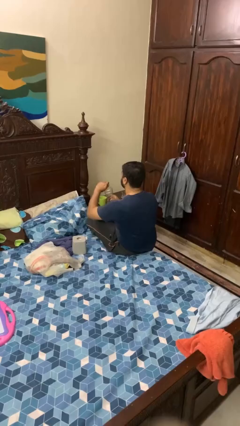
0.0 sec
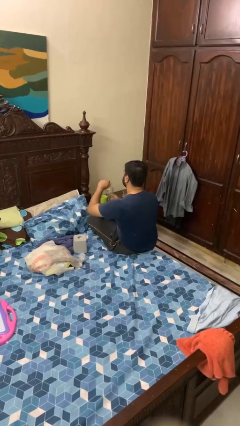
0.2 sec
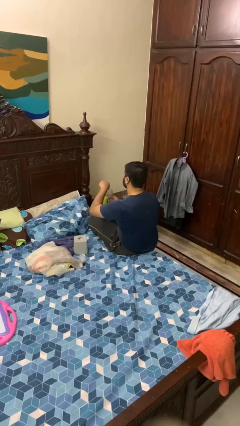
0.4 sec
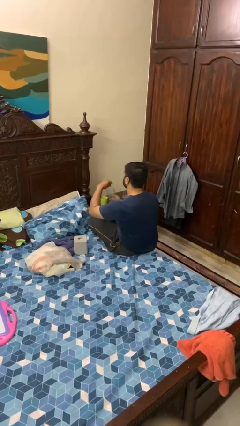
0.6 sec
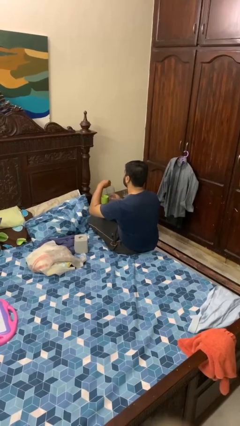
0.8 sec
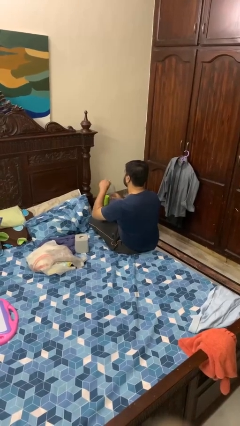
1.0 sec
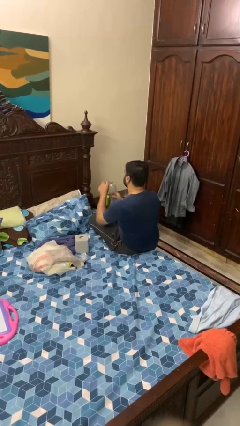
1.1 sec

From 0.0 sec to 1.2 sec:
person unscrews lid from bottle

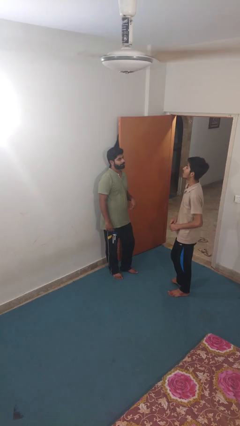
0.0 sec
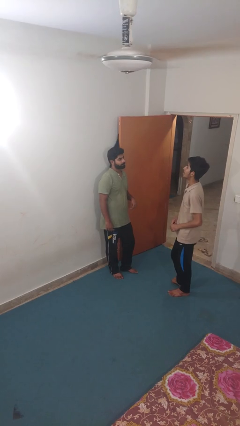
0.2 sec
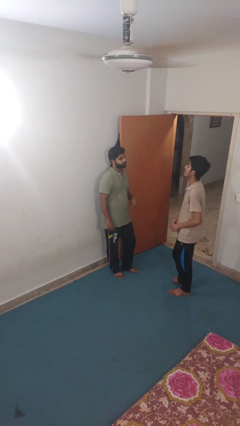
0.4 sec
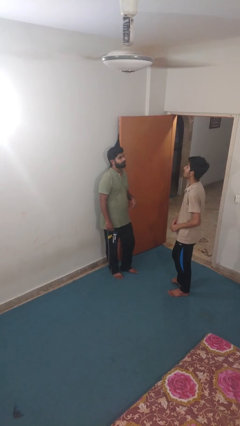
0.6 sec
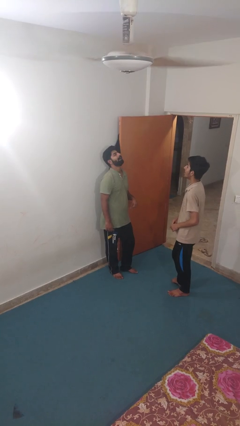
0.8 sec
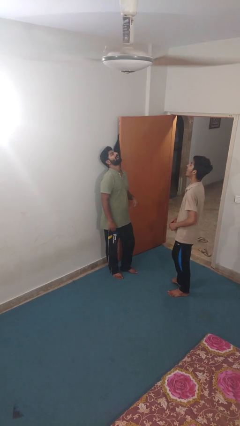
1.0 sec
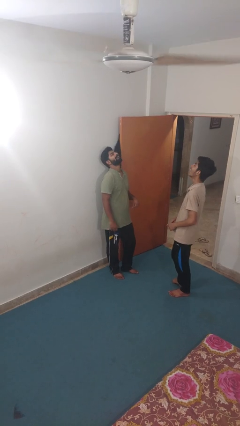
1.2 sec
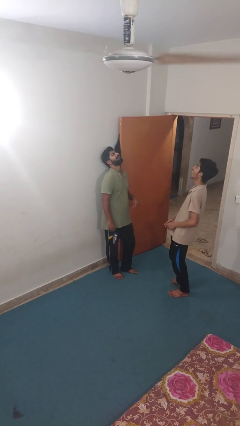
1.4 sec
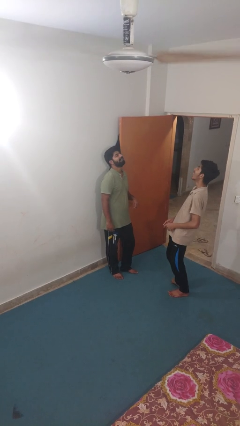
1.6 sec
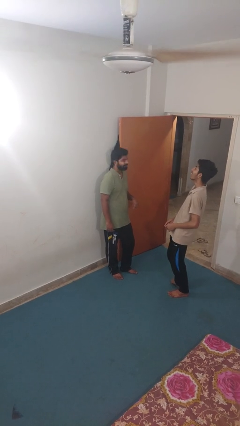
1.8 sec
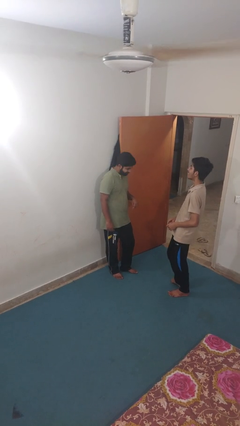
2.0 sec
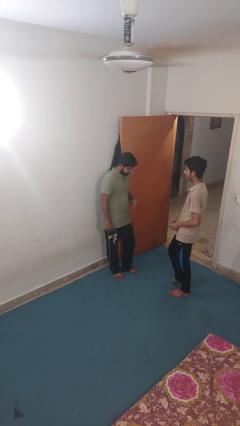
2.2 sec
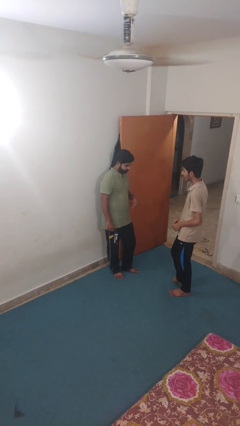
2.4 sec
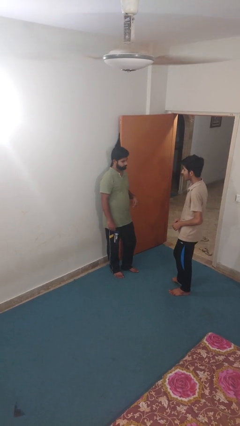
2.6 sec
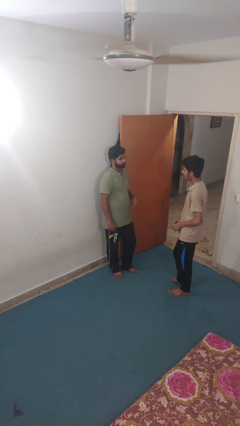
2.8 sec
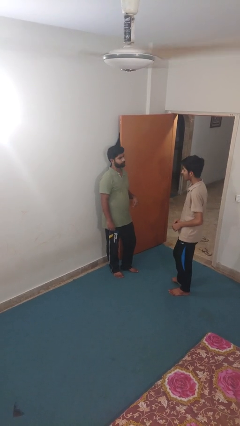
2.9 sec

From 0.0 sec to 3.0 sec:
person laughs with person

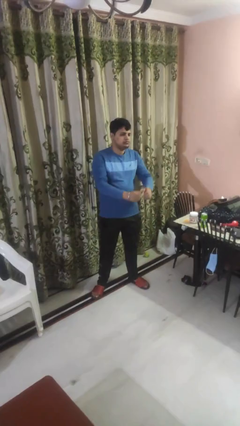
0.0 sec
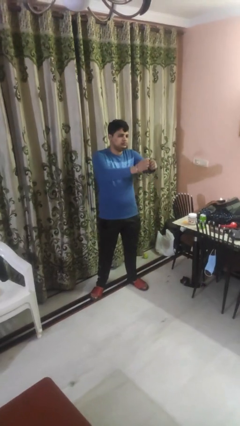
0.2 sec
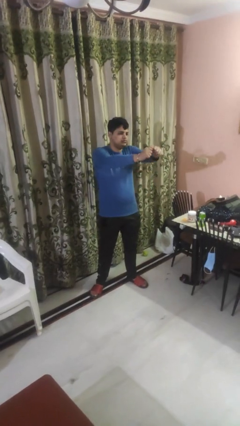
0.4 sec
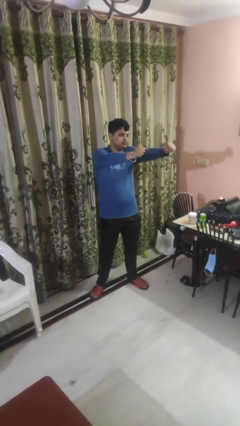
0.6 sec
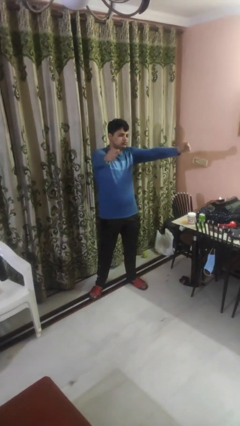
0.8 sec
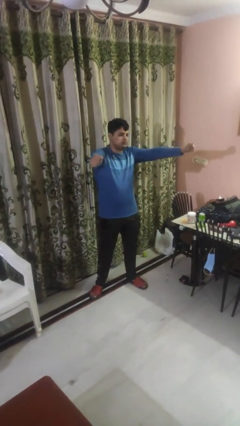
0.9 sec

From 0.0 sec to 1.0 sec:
person gestures zoom in

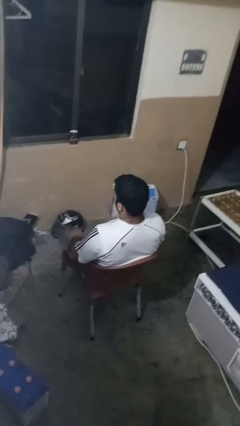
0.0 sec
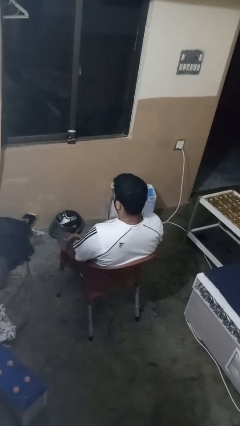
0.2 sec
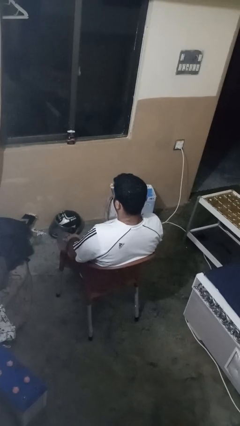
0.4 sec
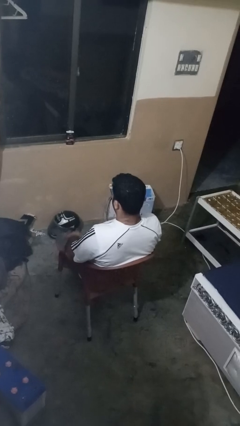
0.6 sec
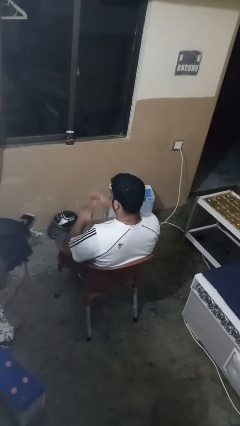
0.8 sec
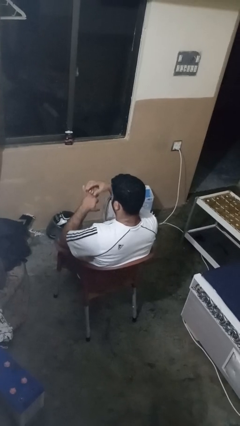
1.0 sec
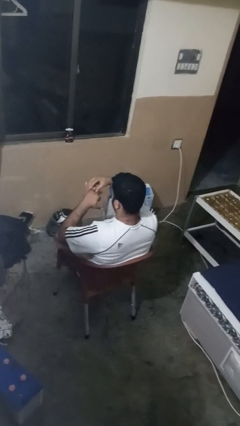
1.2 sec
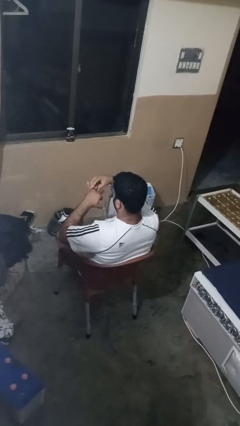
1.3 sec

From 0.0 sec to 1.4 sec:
person takes off ring

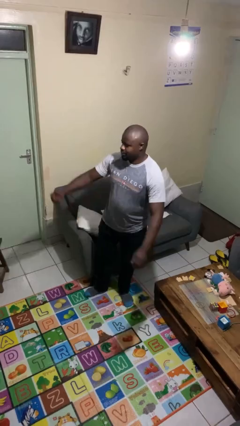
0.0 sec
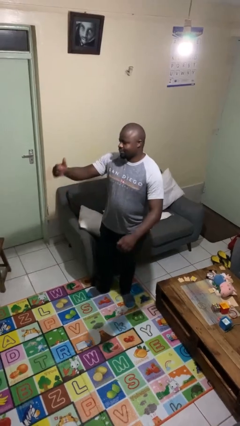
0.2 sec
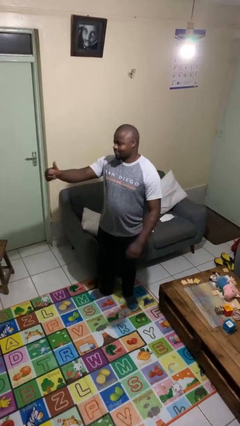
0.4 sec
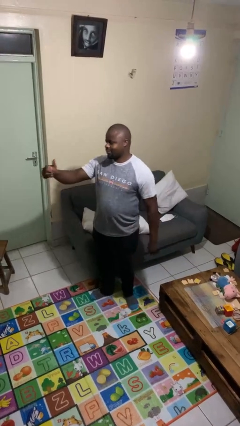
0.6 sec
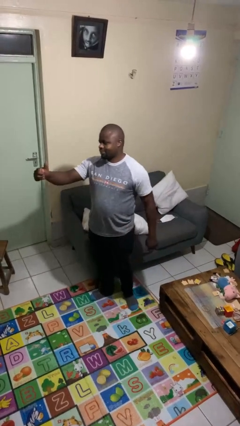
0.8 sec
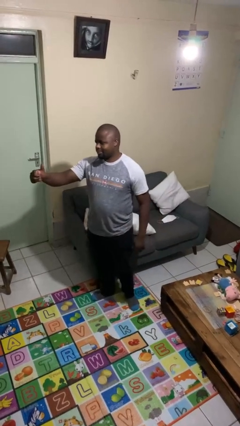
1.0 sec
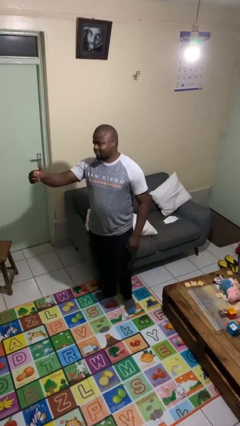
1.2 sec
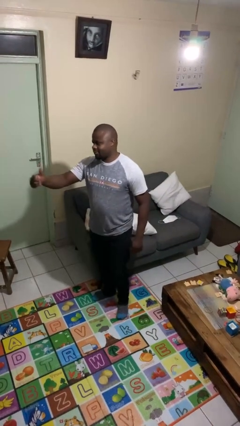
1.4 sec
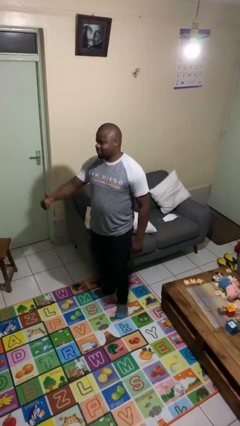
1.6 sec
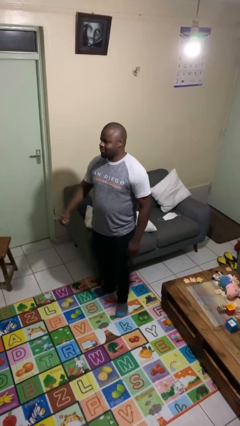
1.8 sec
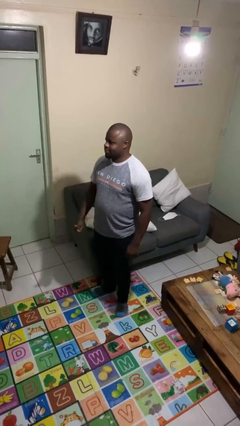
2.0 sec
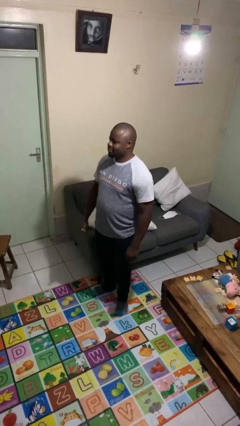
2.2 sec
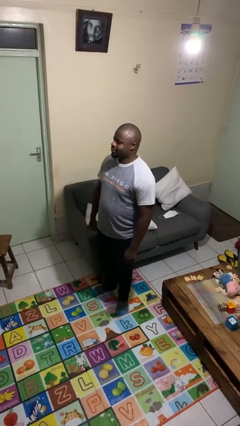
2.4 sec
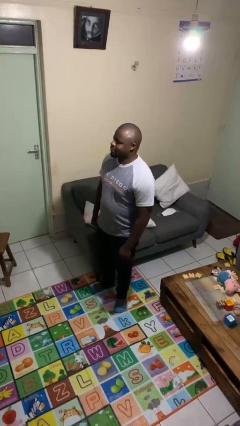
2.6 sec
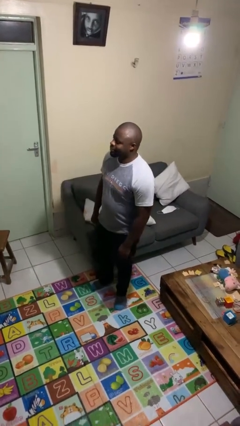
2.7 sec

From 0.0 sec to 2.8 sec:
person gestures thumbs up

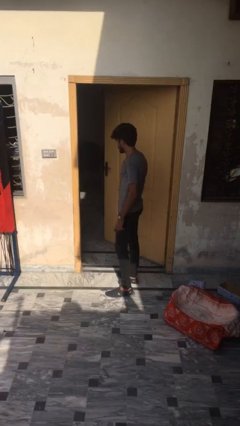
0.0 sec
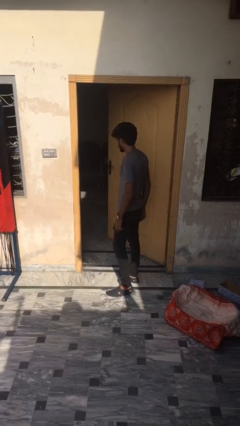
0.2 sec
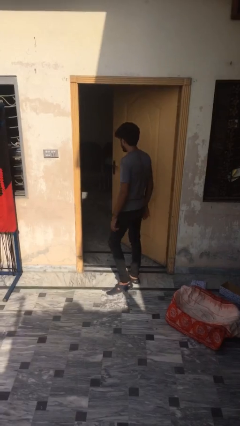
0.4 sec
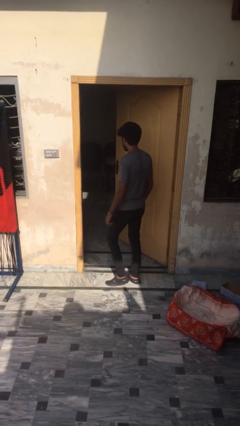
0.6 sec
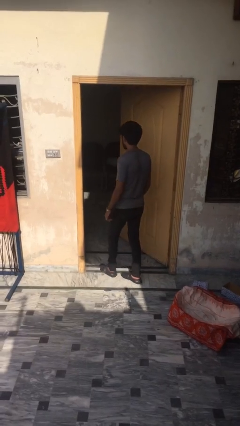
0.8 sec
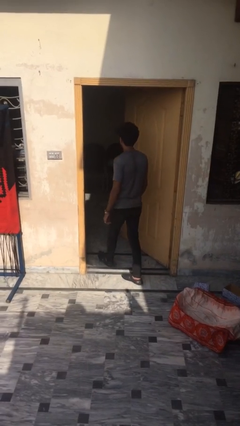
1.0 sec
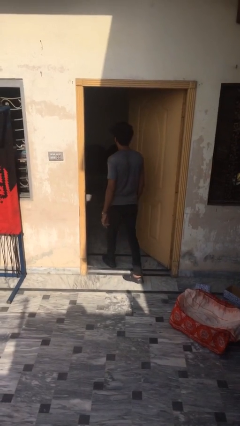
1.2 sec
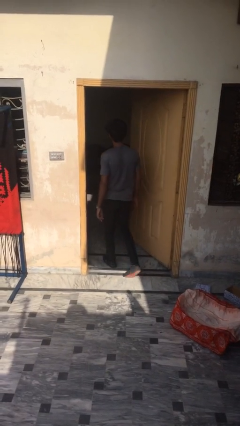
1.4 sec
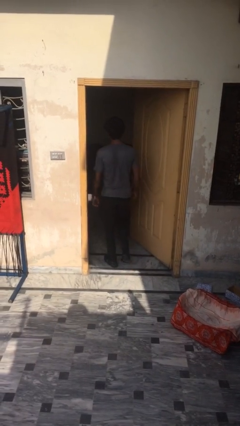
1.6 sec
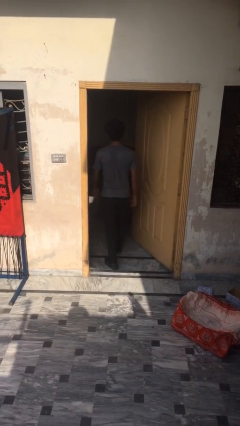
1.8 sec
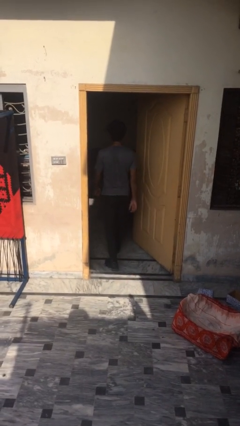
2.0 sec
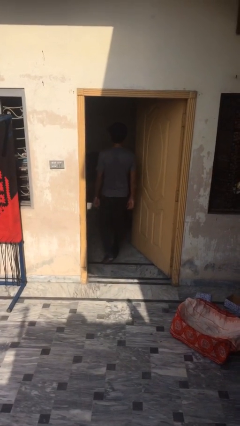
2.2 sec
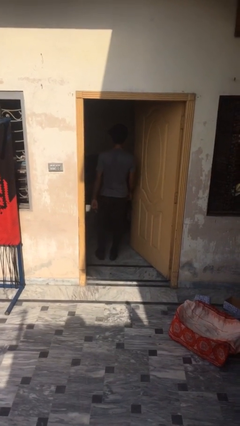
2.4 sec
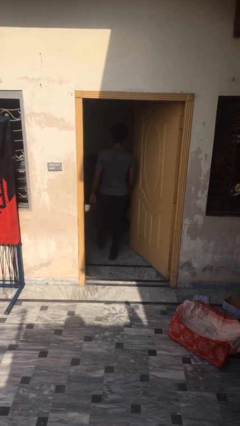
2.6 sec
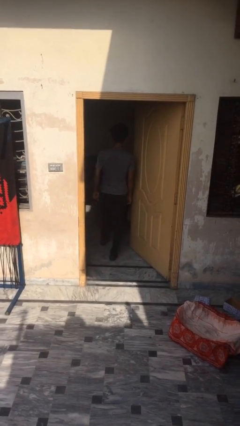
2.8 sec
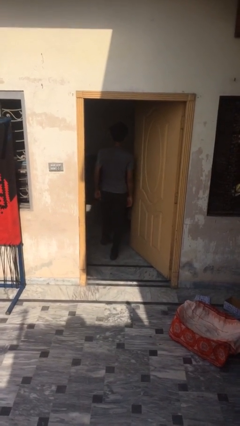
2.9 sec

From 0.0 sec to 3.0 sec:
person exits scene through structure

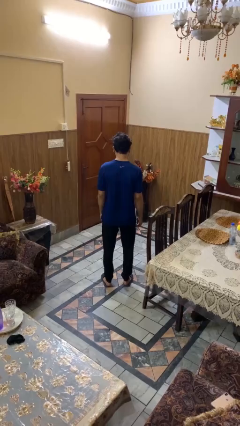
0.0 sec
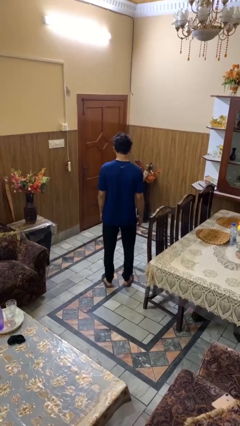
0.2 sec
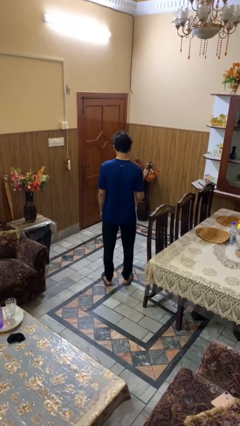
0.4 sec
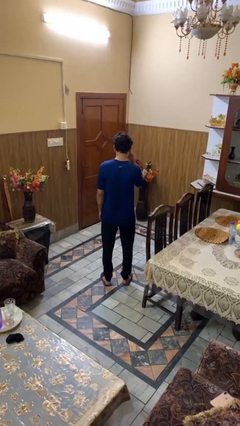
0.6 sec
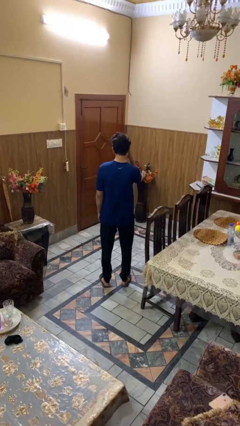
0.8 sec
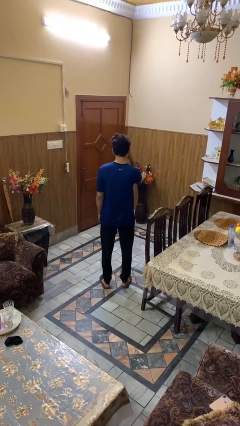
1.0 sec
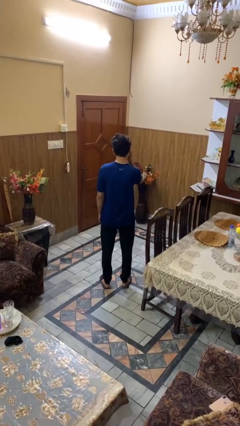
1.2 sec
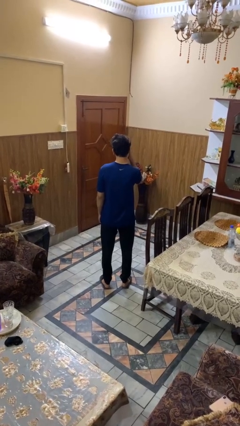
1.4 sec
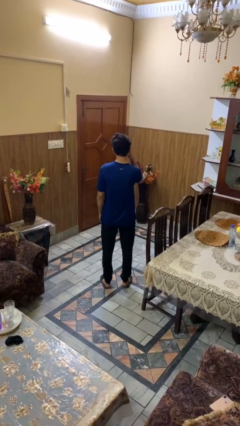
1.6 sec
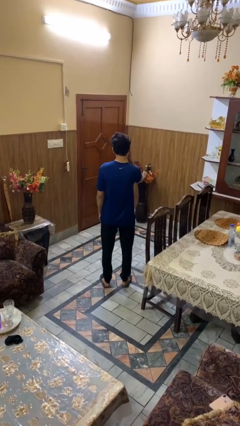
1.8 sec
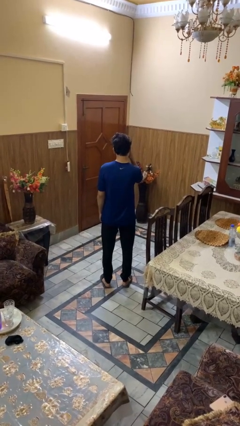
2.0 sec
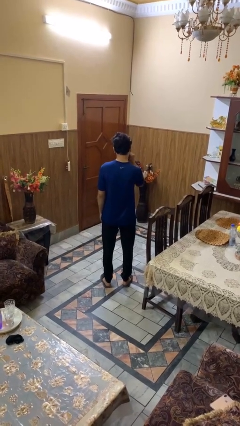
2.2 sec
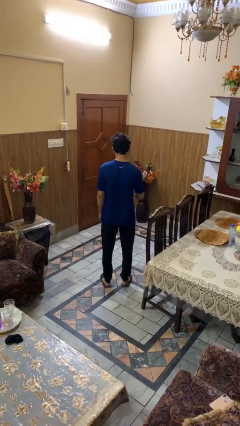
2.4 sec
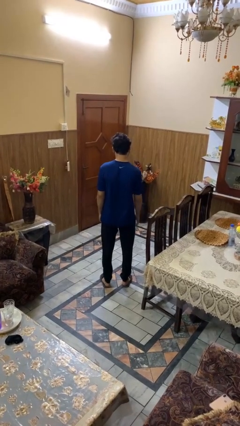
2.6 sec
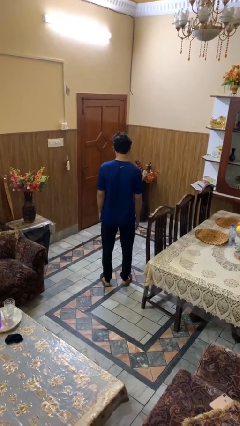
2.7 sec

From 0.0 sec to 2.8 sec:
person rubs eyes

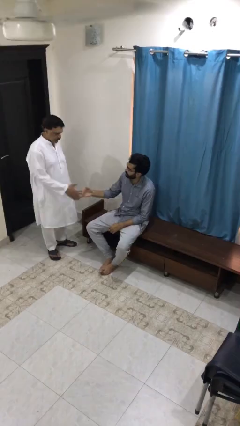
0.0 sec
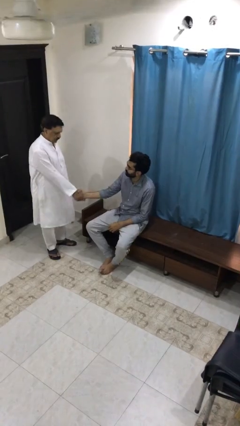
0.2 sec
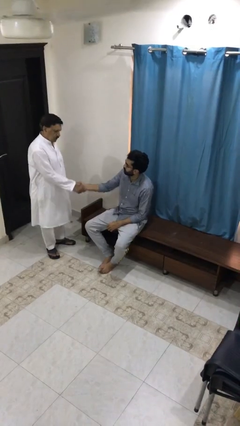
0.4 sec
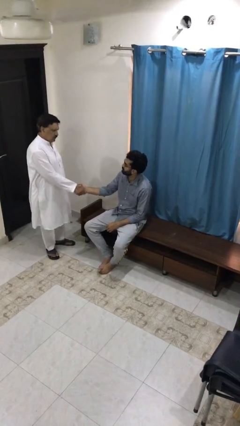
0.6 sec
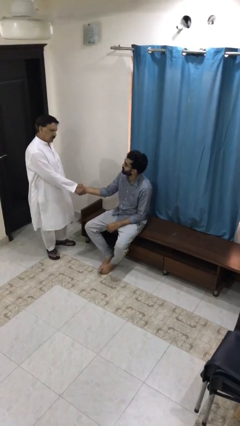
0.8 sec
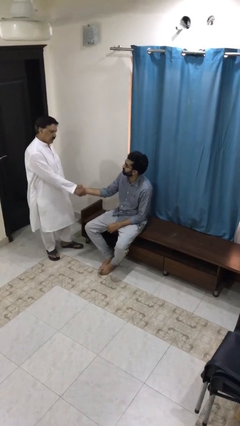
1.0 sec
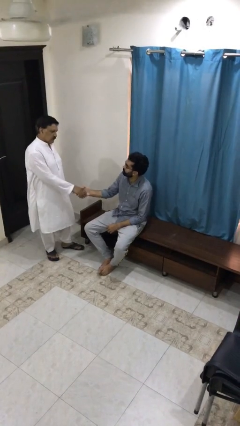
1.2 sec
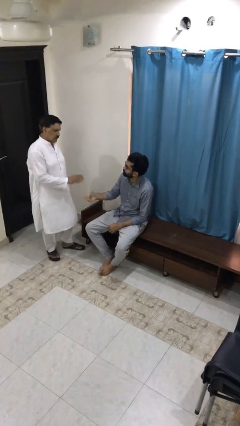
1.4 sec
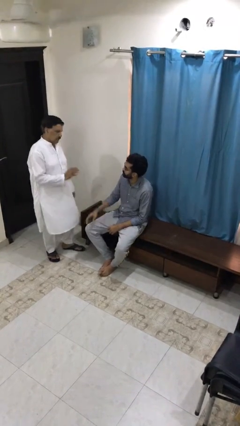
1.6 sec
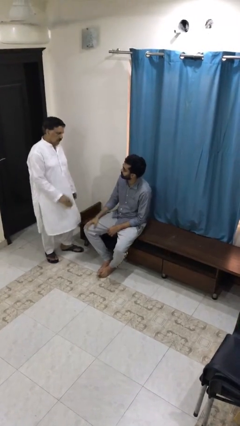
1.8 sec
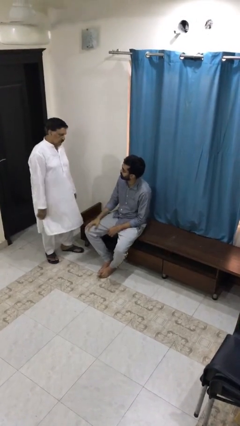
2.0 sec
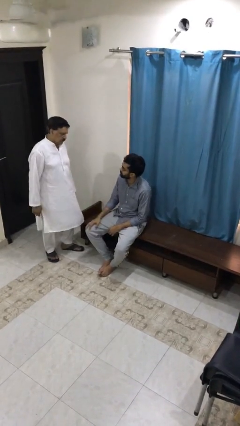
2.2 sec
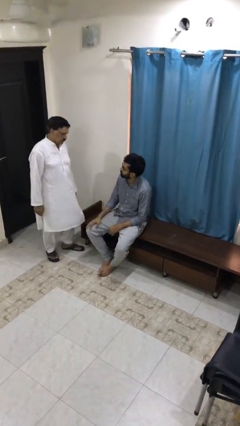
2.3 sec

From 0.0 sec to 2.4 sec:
person shakes hand
